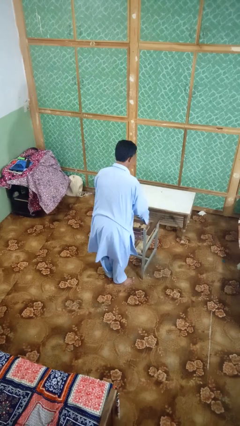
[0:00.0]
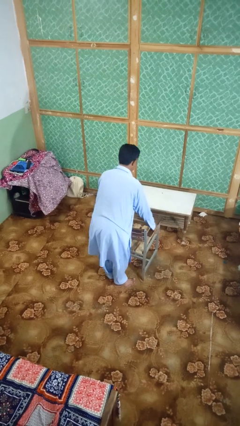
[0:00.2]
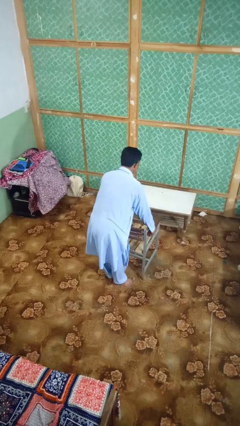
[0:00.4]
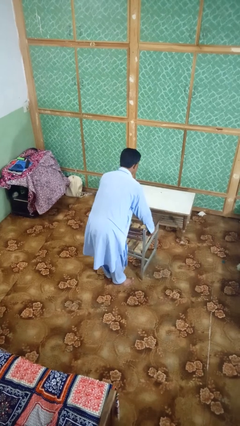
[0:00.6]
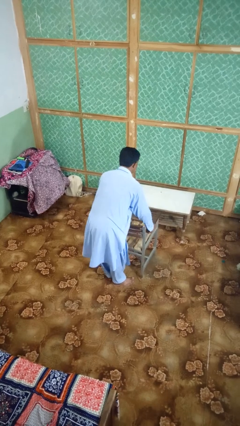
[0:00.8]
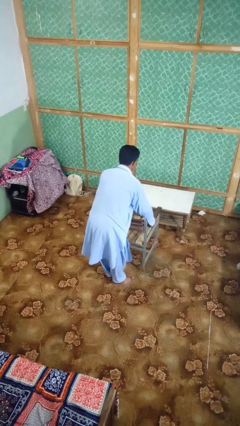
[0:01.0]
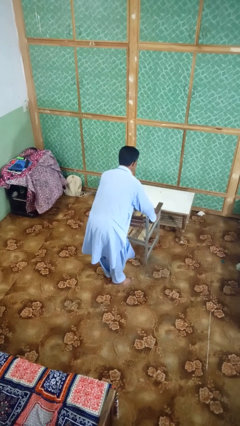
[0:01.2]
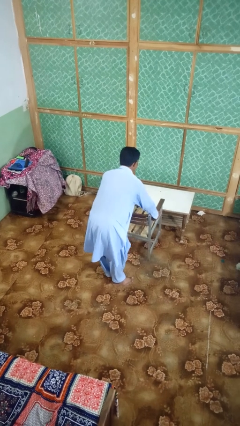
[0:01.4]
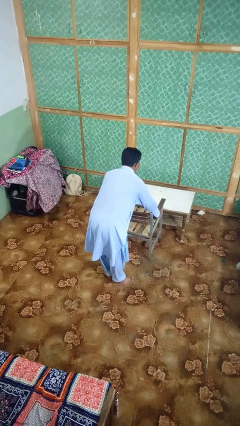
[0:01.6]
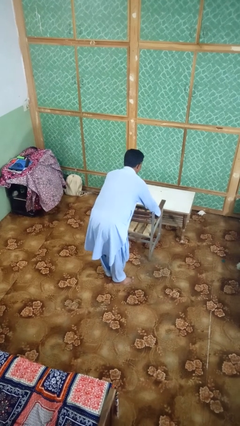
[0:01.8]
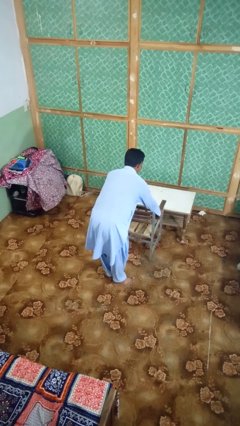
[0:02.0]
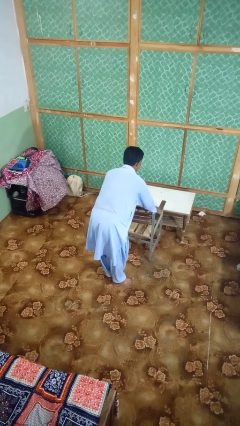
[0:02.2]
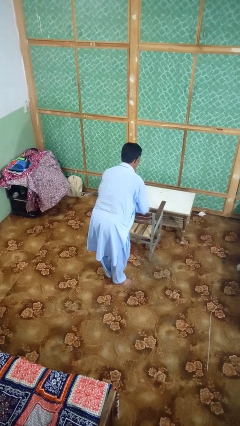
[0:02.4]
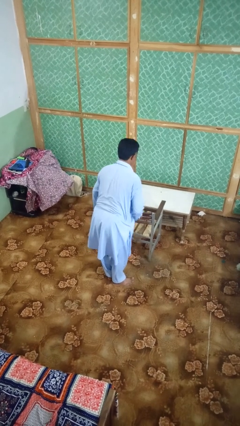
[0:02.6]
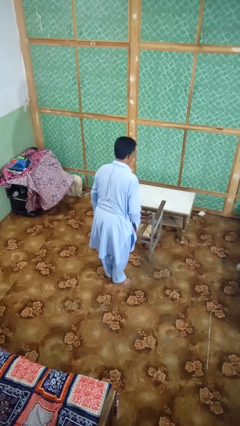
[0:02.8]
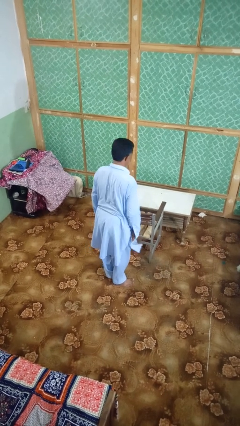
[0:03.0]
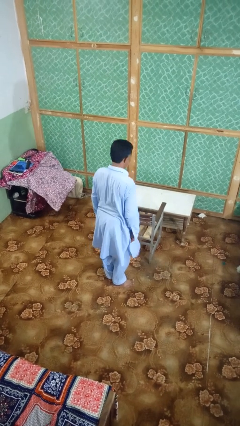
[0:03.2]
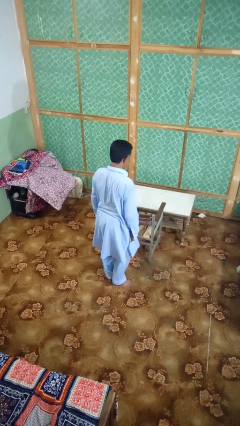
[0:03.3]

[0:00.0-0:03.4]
person pushes in chair

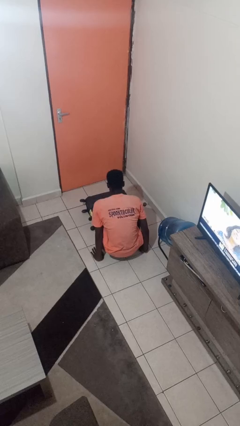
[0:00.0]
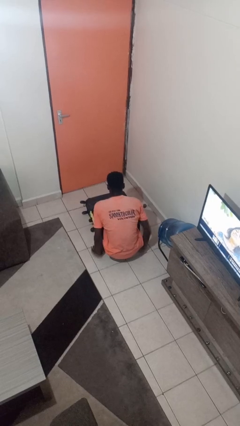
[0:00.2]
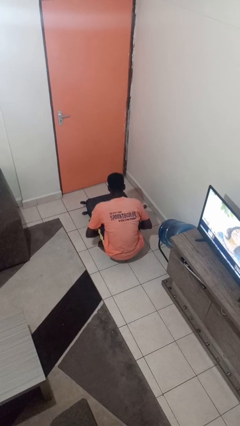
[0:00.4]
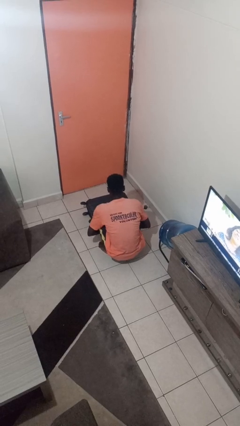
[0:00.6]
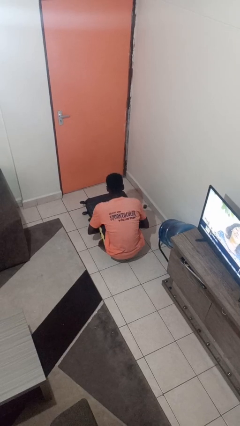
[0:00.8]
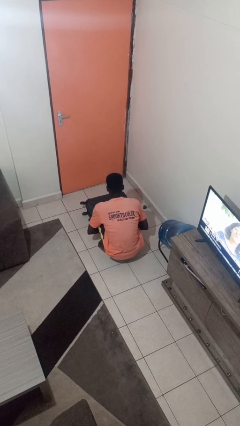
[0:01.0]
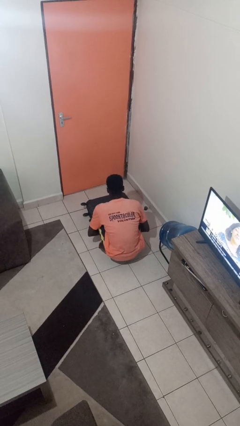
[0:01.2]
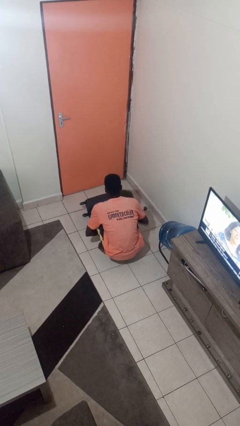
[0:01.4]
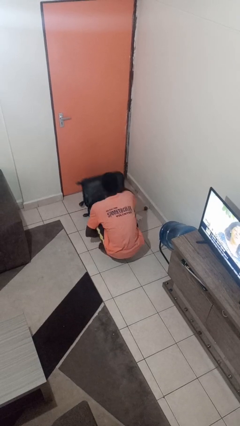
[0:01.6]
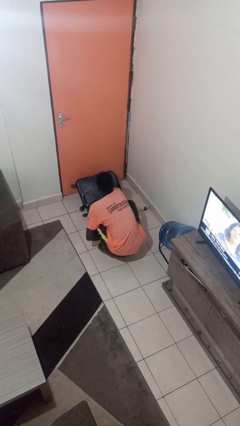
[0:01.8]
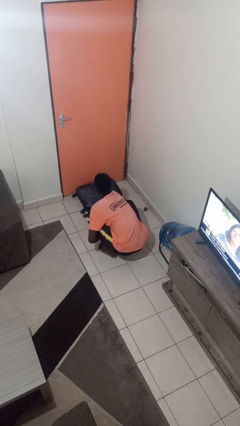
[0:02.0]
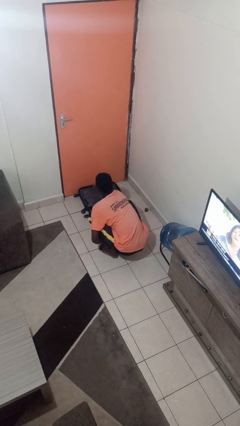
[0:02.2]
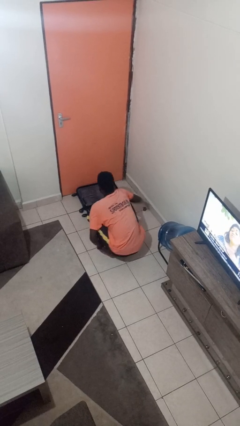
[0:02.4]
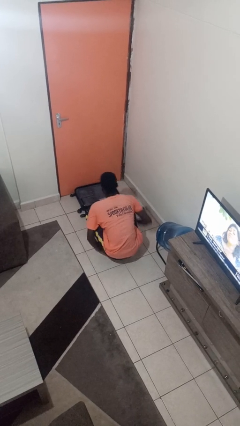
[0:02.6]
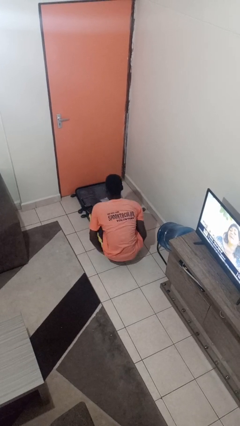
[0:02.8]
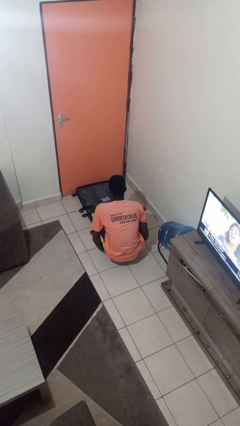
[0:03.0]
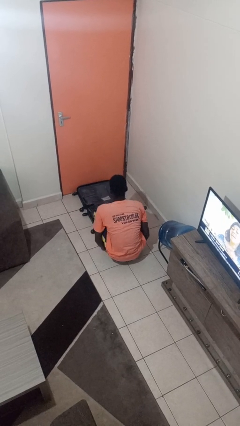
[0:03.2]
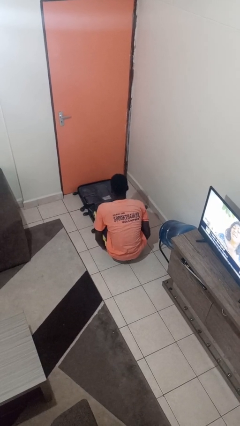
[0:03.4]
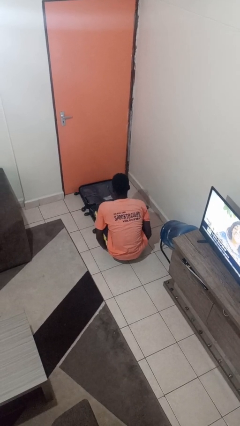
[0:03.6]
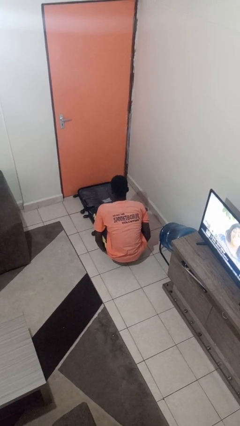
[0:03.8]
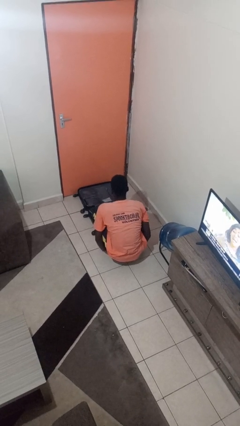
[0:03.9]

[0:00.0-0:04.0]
person opens suitcase

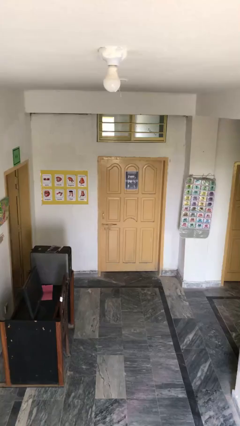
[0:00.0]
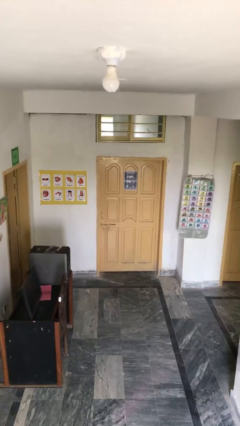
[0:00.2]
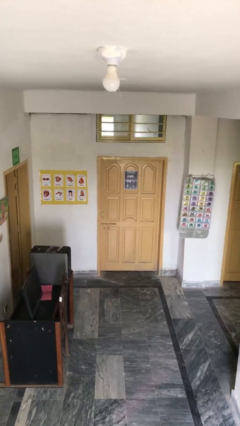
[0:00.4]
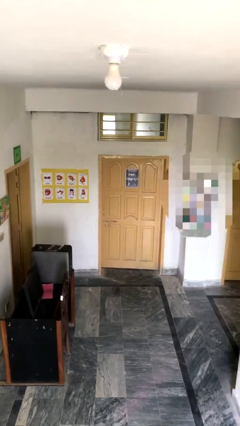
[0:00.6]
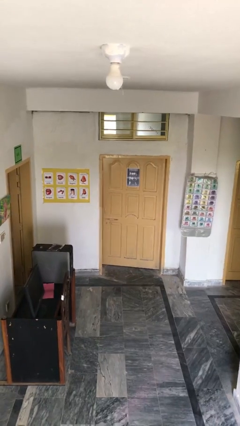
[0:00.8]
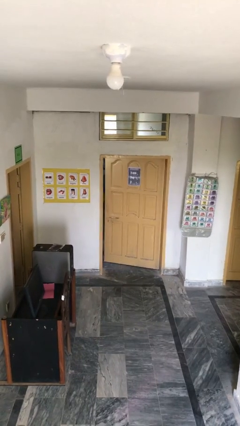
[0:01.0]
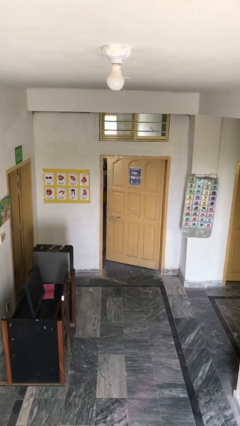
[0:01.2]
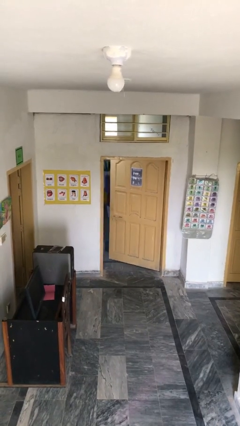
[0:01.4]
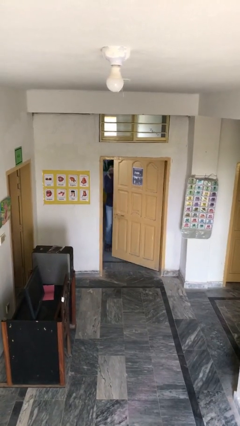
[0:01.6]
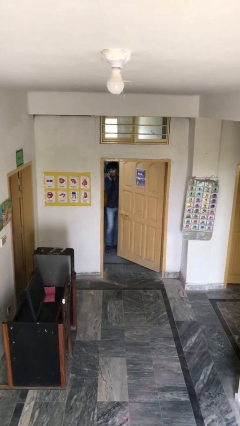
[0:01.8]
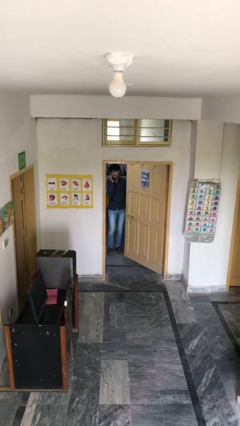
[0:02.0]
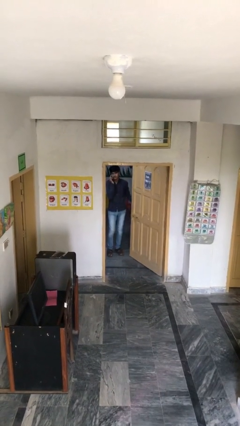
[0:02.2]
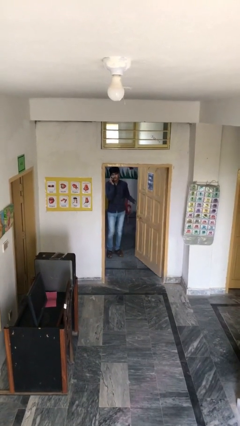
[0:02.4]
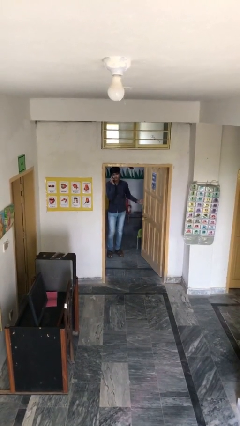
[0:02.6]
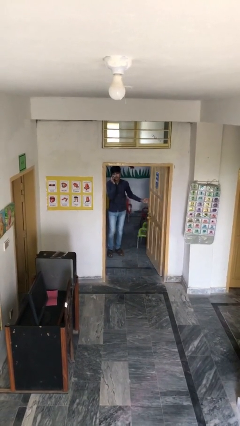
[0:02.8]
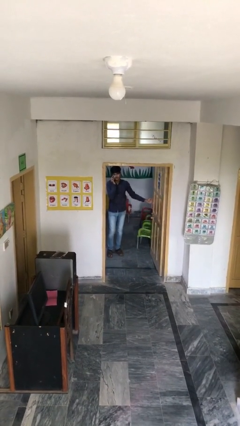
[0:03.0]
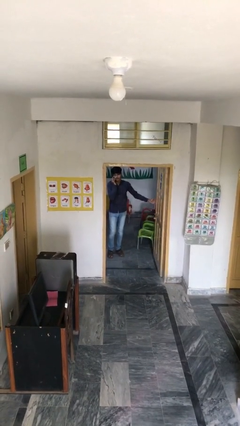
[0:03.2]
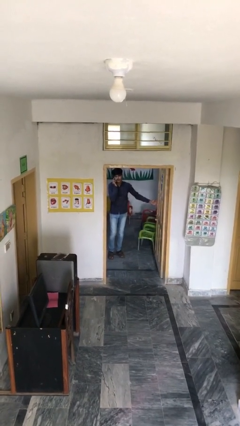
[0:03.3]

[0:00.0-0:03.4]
person opens facility door

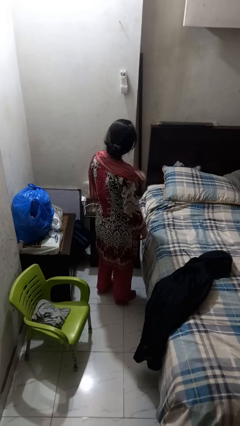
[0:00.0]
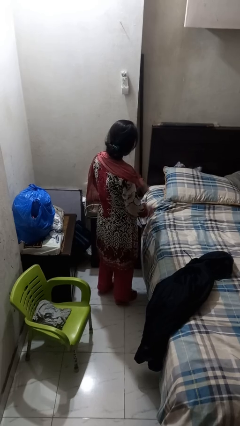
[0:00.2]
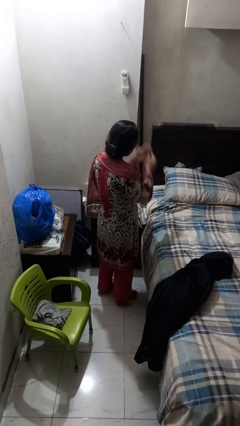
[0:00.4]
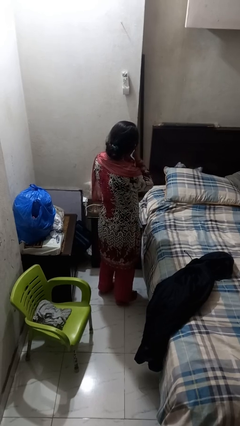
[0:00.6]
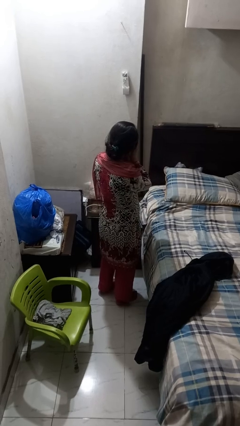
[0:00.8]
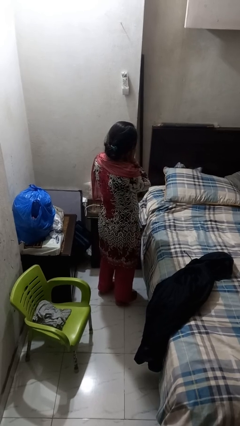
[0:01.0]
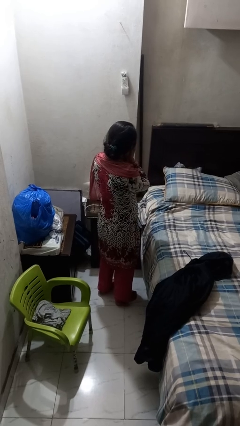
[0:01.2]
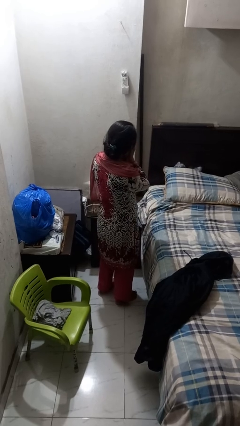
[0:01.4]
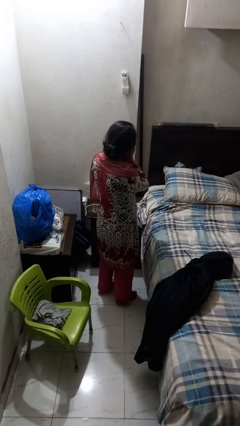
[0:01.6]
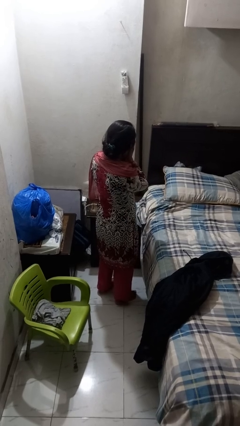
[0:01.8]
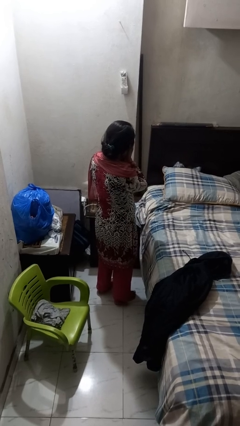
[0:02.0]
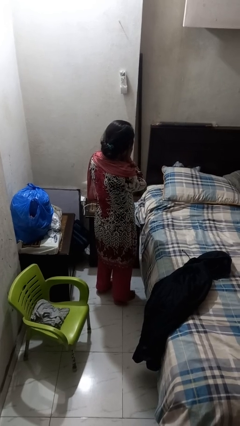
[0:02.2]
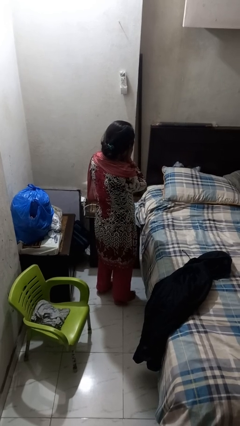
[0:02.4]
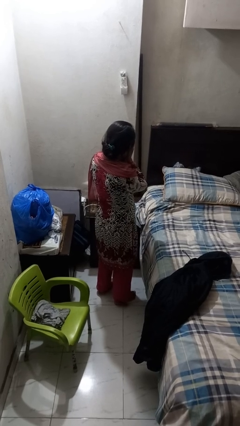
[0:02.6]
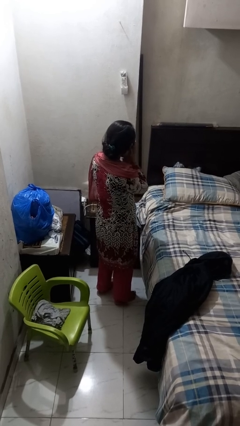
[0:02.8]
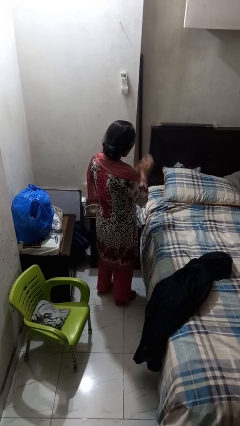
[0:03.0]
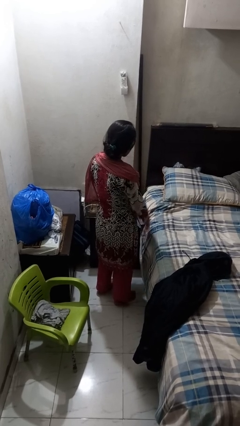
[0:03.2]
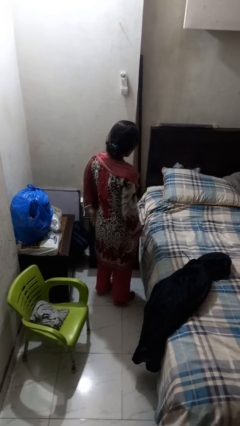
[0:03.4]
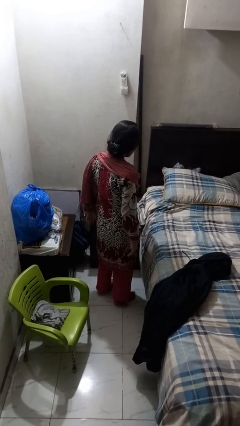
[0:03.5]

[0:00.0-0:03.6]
person covers face with hands

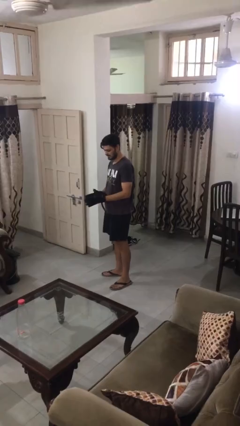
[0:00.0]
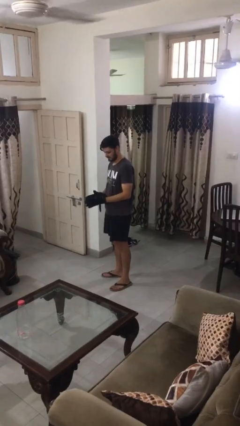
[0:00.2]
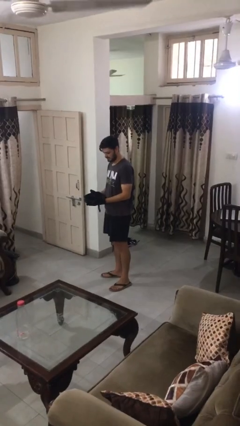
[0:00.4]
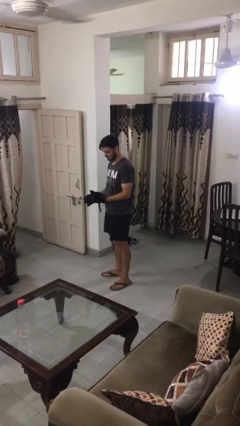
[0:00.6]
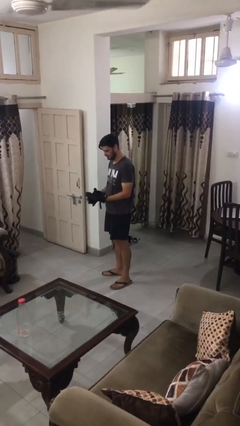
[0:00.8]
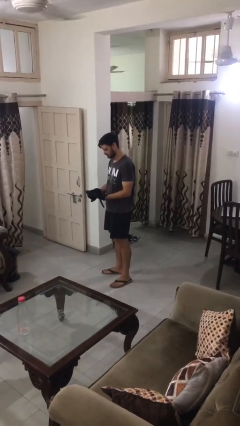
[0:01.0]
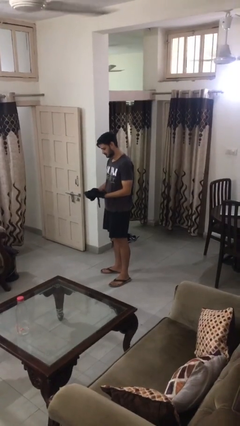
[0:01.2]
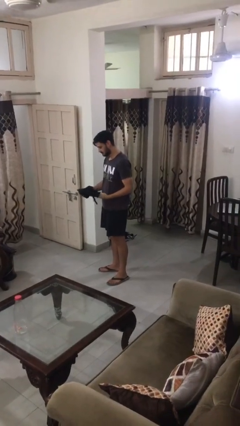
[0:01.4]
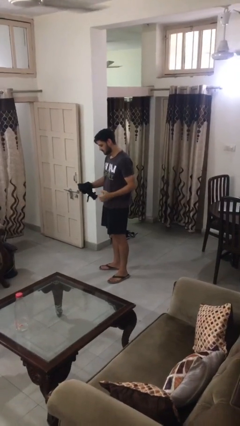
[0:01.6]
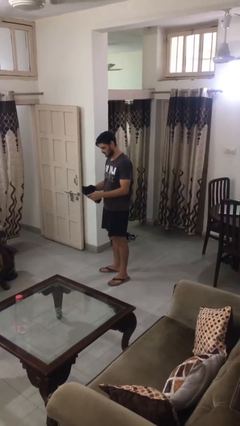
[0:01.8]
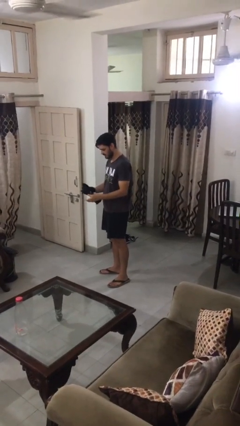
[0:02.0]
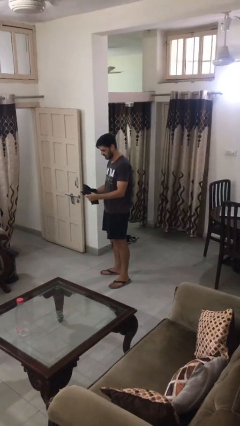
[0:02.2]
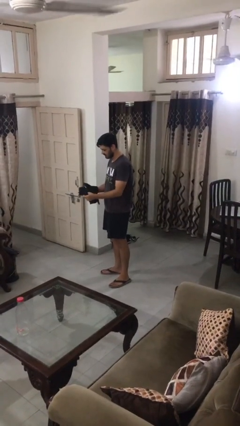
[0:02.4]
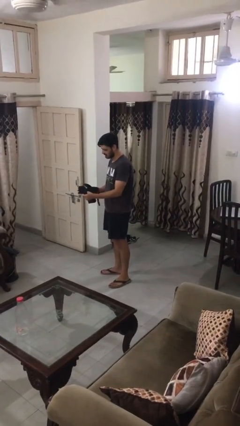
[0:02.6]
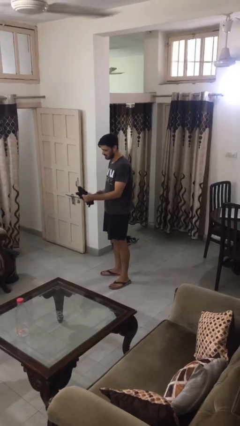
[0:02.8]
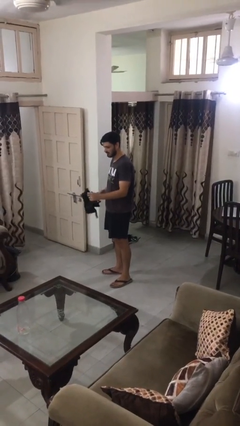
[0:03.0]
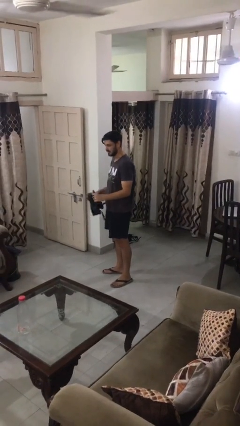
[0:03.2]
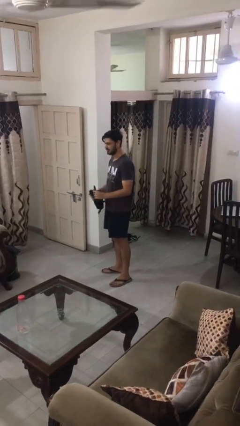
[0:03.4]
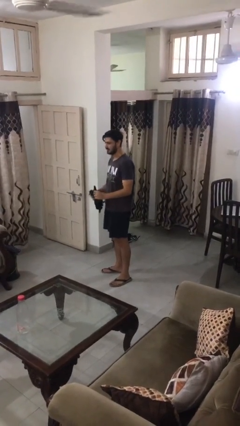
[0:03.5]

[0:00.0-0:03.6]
person takes off gloves
